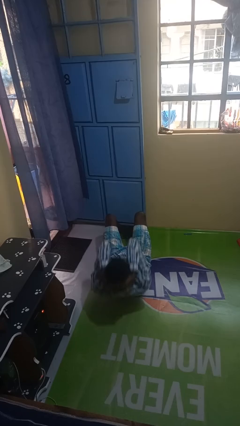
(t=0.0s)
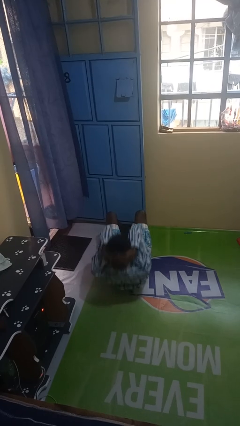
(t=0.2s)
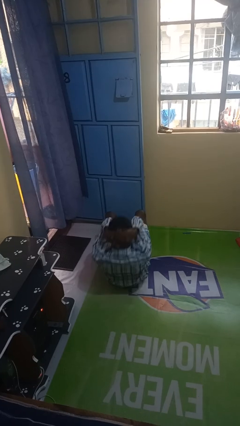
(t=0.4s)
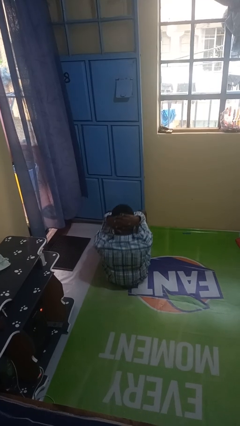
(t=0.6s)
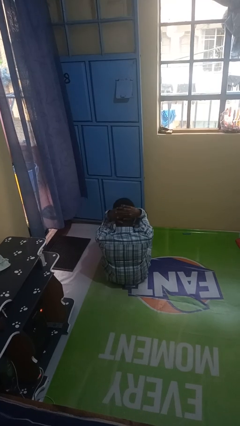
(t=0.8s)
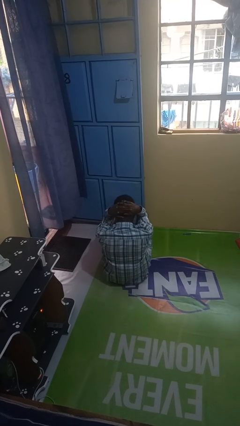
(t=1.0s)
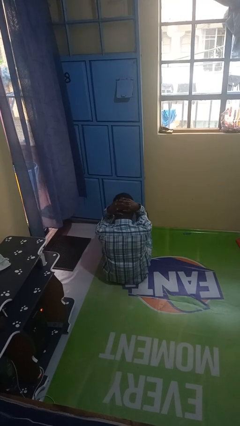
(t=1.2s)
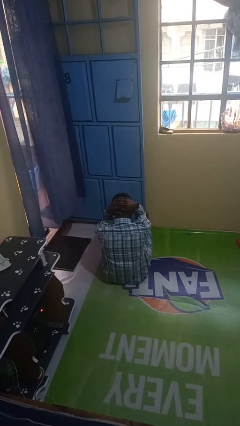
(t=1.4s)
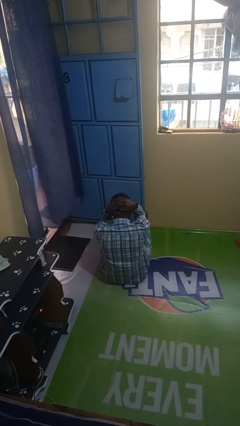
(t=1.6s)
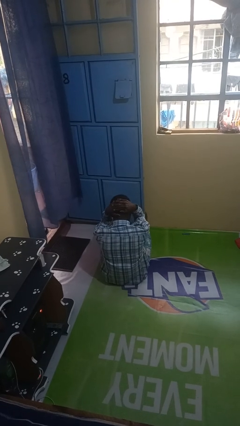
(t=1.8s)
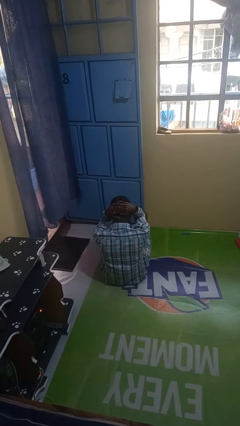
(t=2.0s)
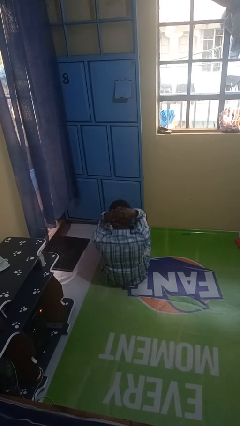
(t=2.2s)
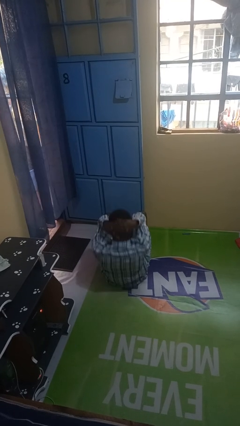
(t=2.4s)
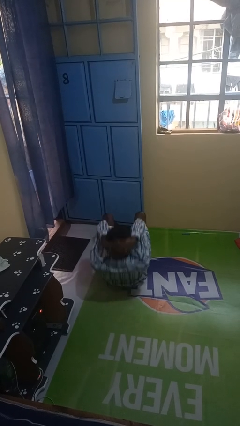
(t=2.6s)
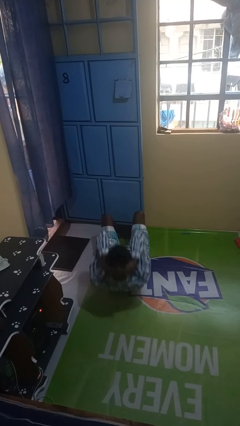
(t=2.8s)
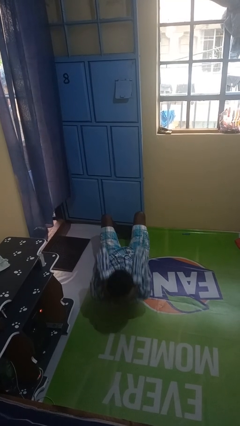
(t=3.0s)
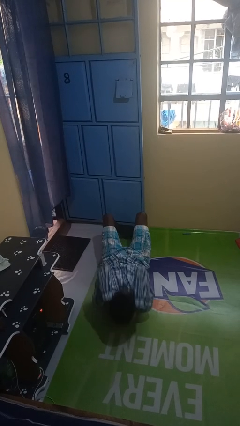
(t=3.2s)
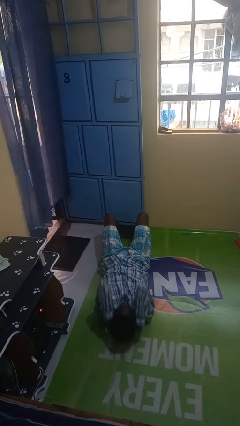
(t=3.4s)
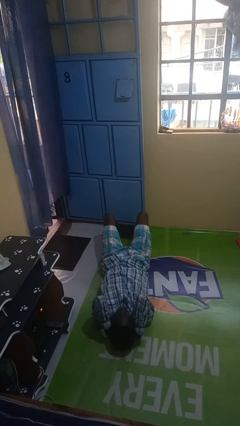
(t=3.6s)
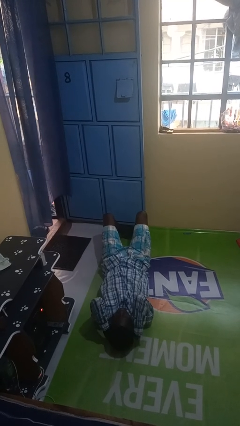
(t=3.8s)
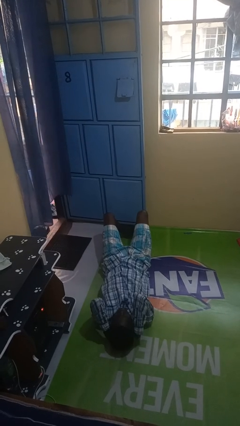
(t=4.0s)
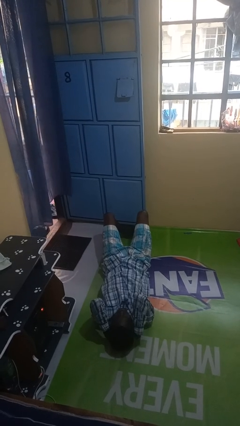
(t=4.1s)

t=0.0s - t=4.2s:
person exercises with situp

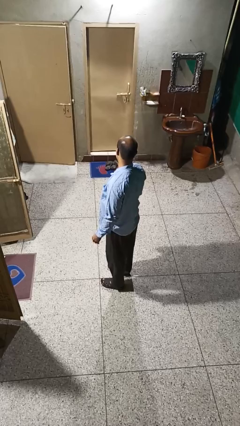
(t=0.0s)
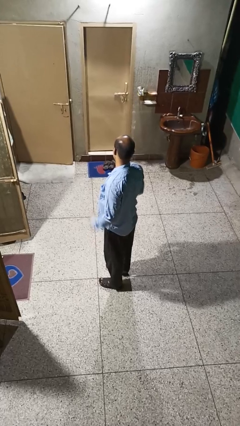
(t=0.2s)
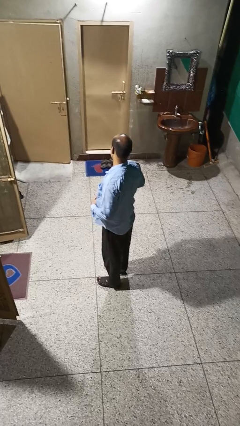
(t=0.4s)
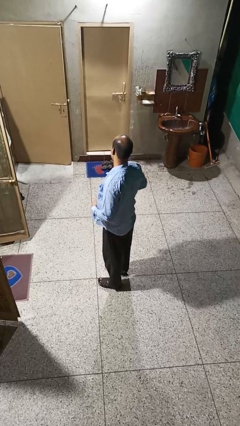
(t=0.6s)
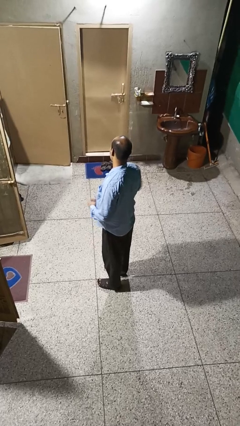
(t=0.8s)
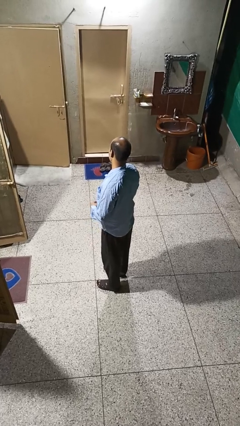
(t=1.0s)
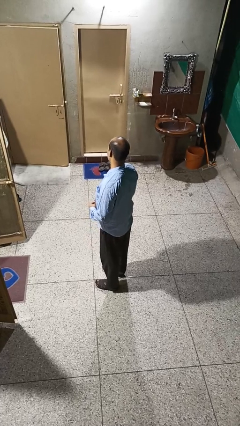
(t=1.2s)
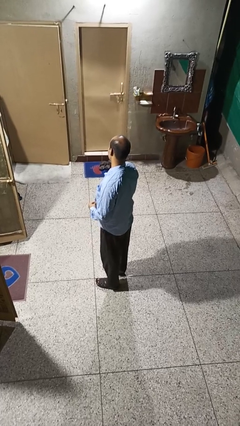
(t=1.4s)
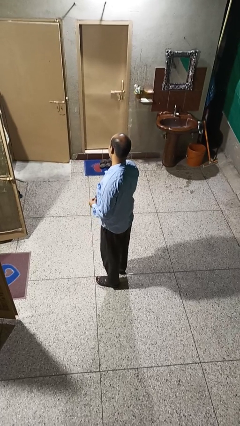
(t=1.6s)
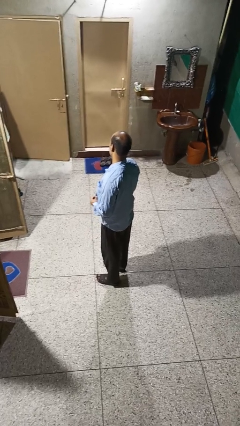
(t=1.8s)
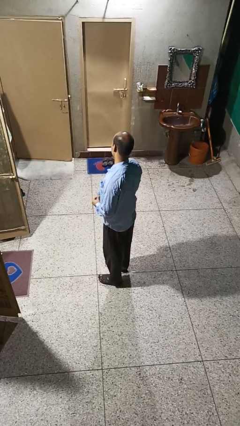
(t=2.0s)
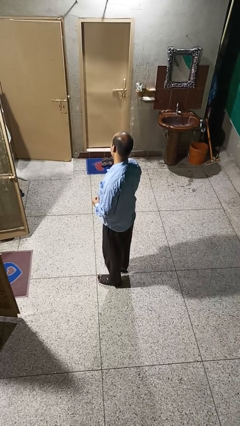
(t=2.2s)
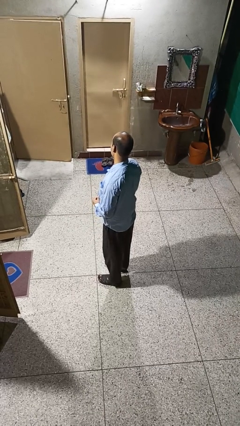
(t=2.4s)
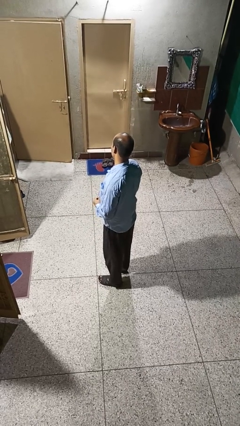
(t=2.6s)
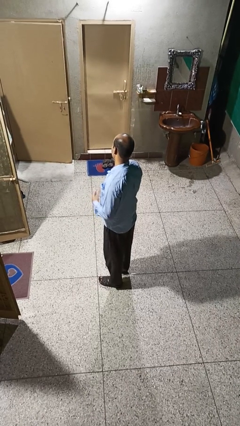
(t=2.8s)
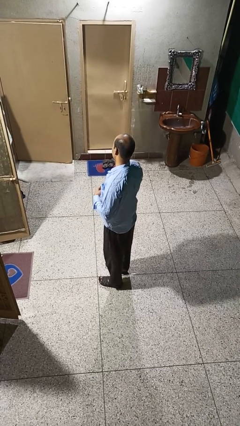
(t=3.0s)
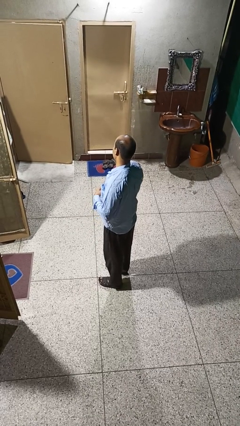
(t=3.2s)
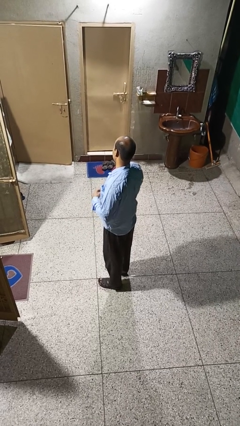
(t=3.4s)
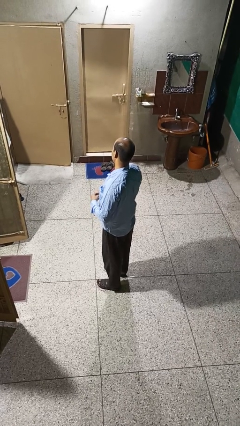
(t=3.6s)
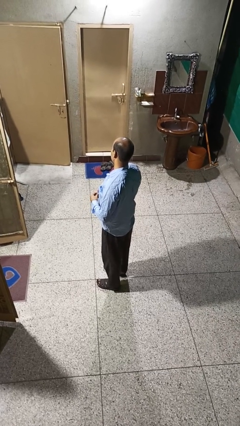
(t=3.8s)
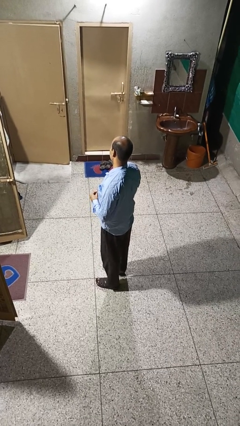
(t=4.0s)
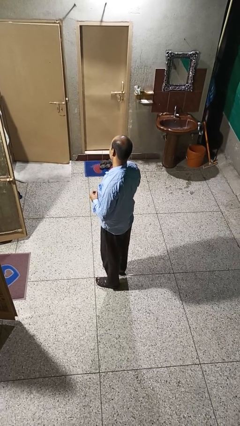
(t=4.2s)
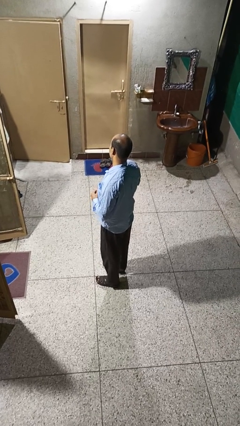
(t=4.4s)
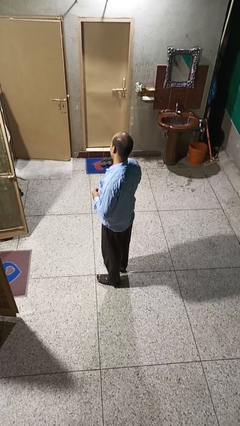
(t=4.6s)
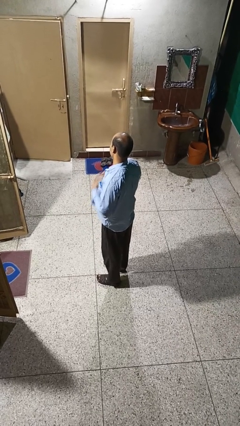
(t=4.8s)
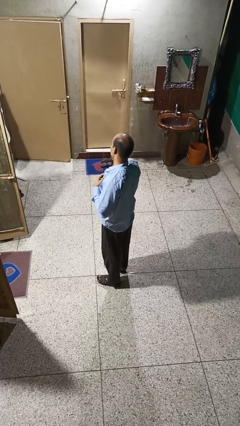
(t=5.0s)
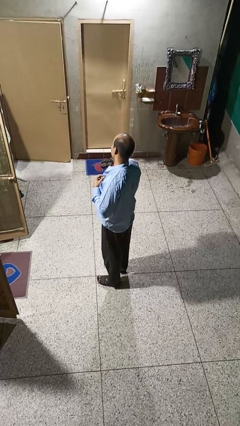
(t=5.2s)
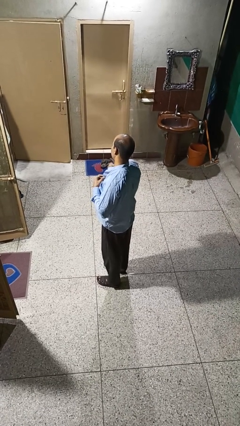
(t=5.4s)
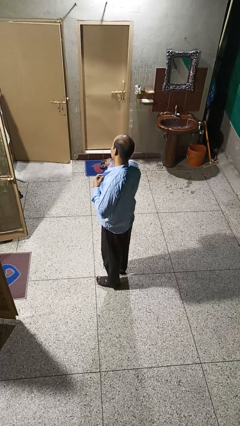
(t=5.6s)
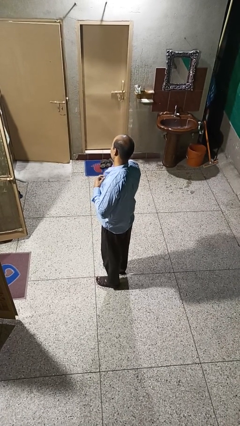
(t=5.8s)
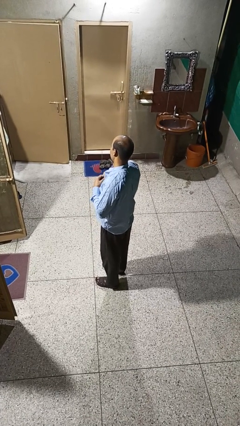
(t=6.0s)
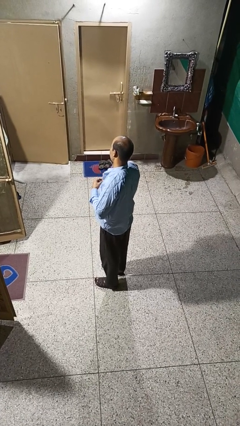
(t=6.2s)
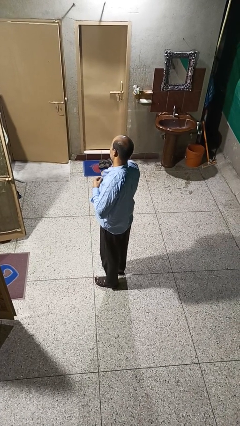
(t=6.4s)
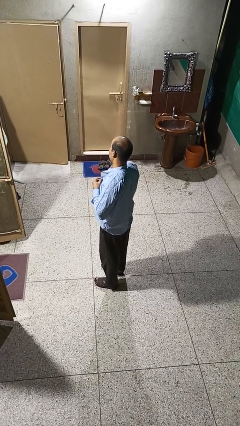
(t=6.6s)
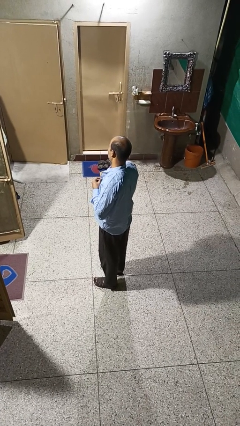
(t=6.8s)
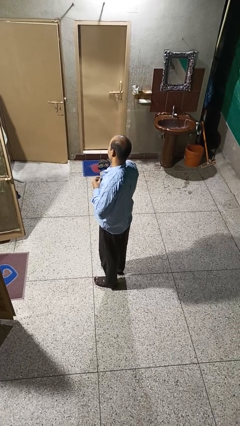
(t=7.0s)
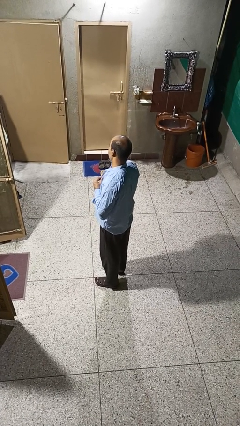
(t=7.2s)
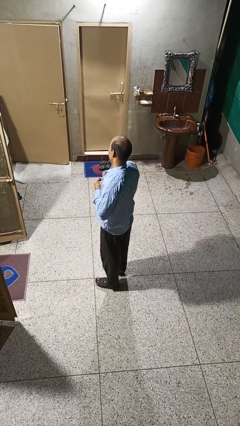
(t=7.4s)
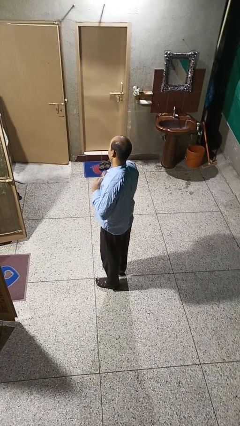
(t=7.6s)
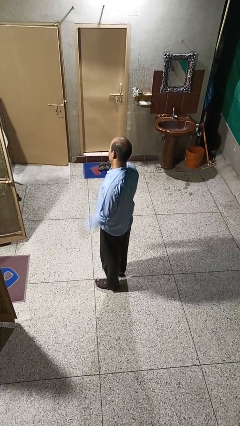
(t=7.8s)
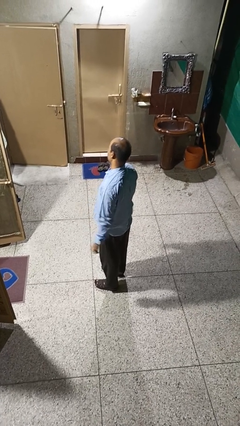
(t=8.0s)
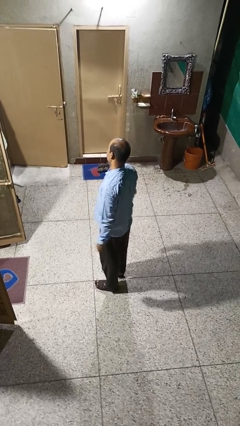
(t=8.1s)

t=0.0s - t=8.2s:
person buttons shirt

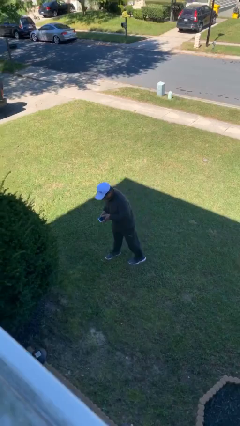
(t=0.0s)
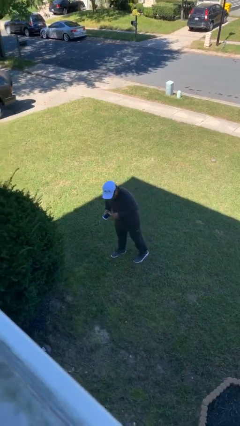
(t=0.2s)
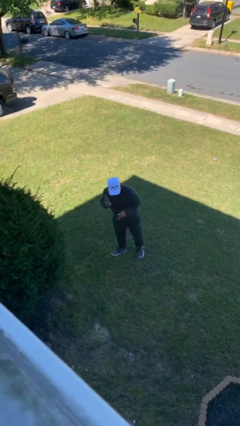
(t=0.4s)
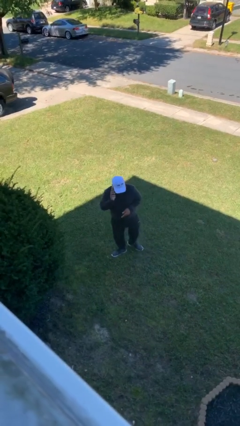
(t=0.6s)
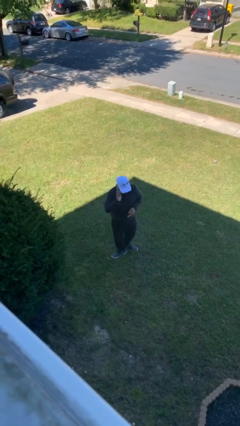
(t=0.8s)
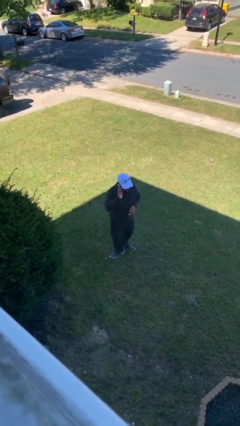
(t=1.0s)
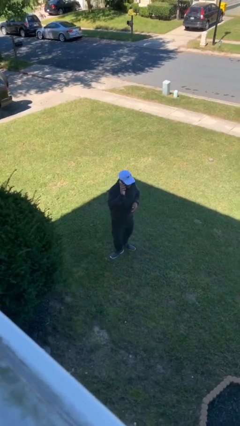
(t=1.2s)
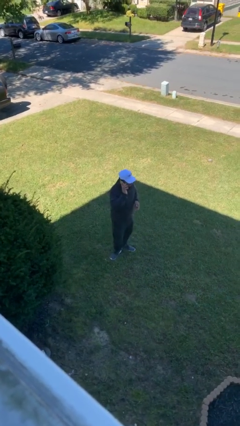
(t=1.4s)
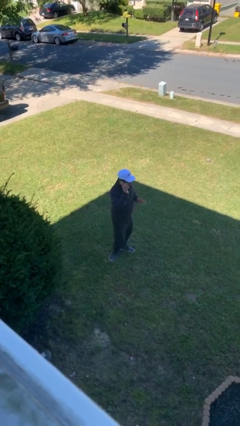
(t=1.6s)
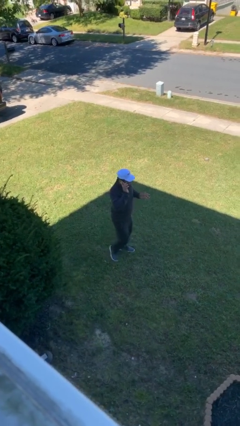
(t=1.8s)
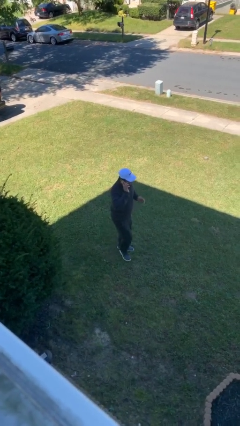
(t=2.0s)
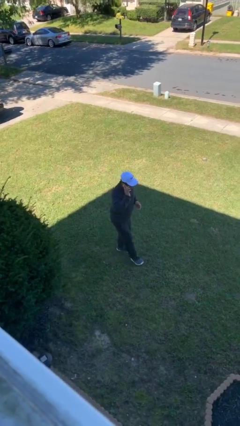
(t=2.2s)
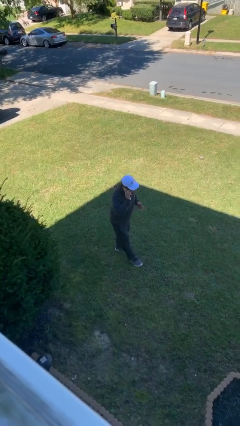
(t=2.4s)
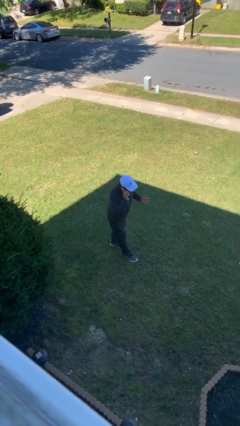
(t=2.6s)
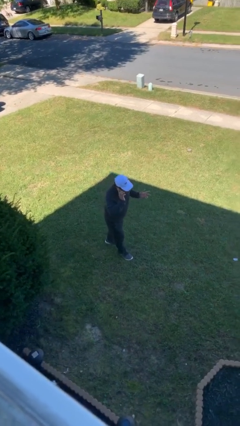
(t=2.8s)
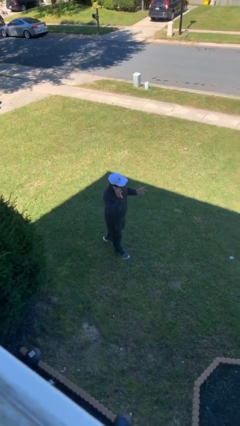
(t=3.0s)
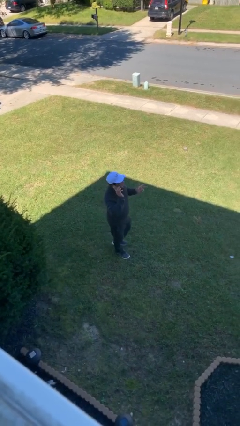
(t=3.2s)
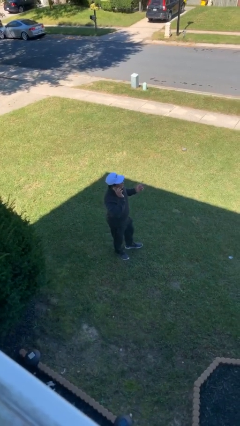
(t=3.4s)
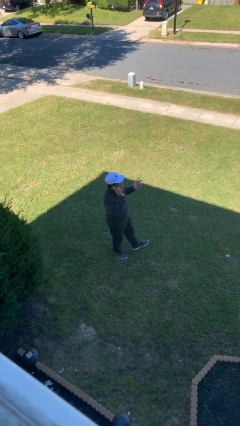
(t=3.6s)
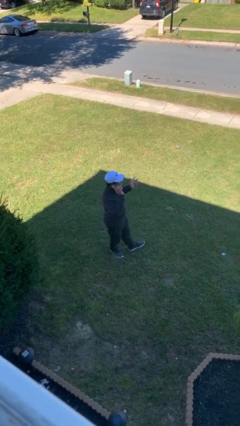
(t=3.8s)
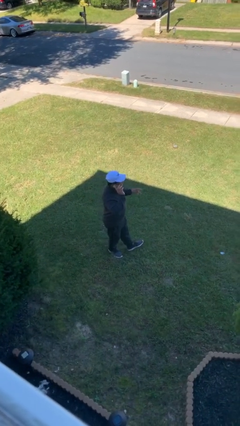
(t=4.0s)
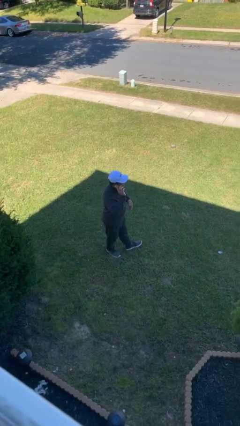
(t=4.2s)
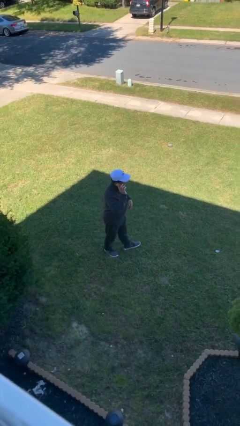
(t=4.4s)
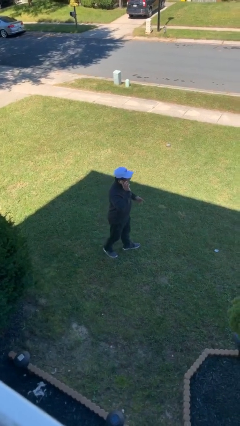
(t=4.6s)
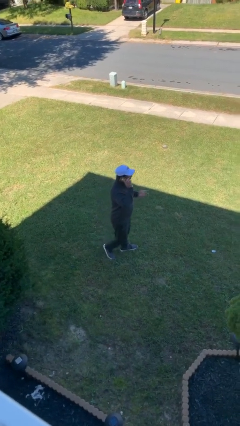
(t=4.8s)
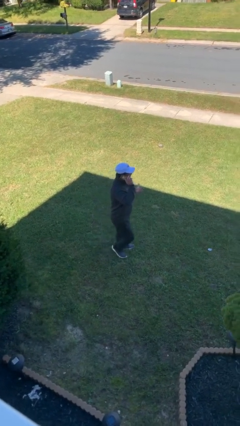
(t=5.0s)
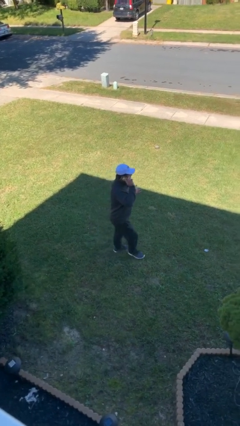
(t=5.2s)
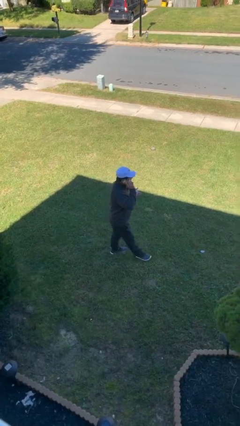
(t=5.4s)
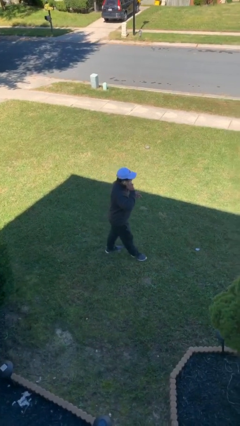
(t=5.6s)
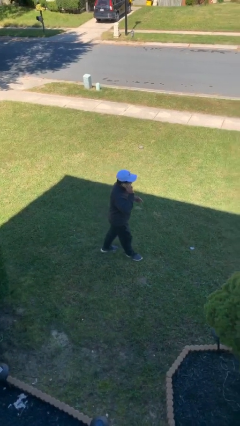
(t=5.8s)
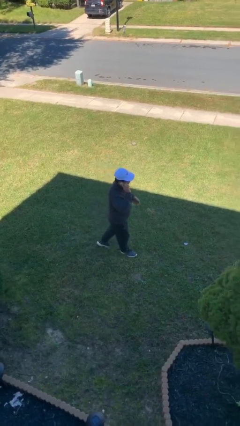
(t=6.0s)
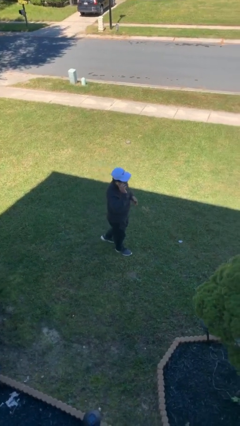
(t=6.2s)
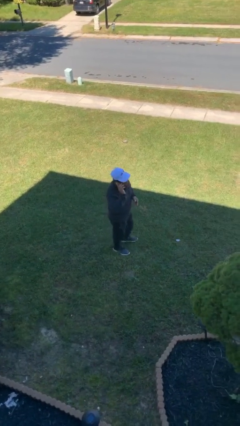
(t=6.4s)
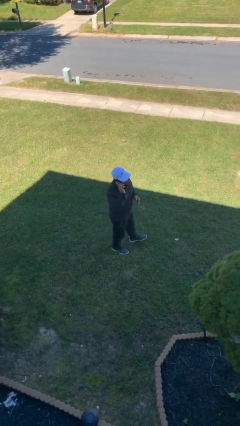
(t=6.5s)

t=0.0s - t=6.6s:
person talks on phone
